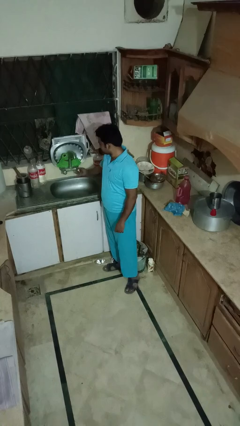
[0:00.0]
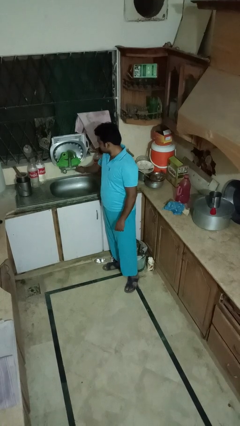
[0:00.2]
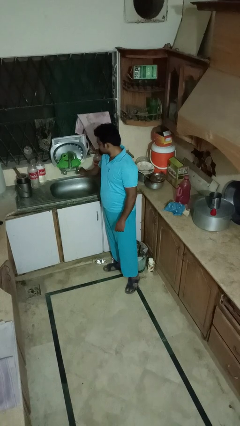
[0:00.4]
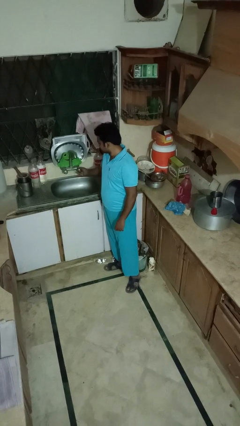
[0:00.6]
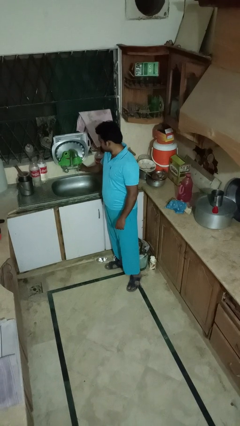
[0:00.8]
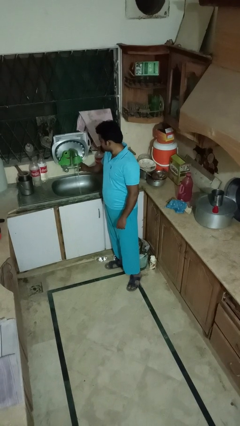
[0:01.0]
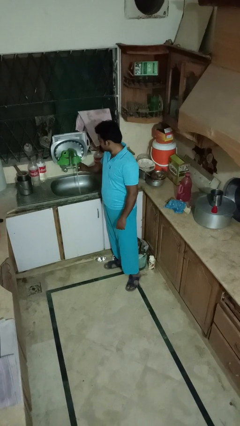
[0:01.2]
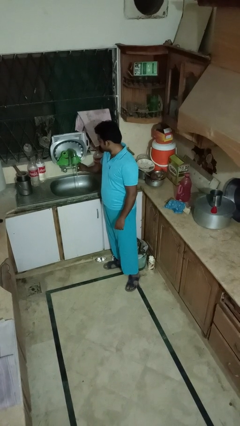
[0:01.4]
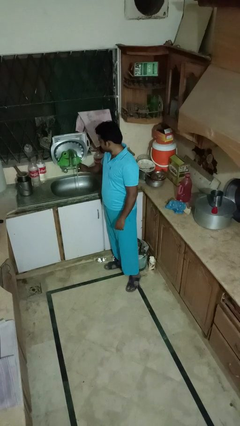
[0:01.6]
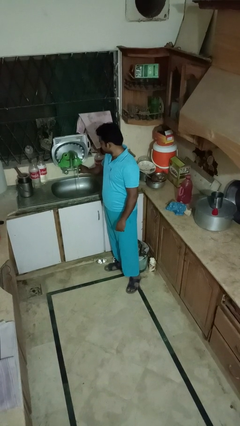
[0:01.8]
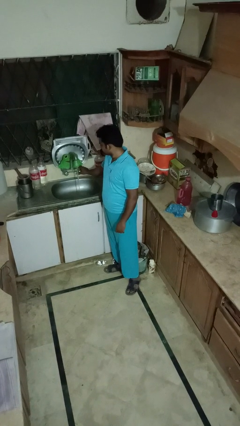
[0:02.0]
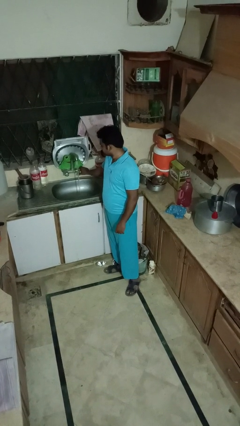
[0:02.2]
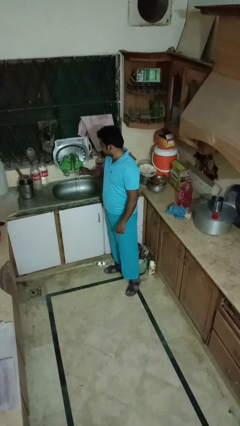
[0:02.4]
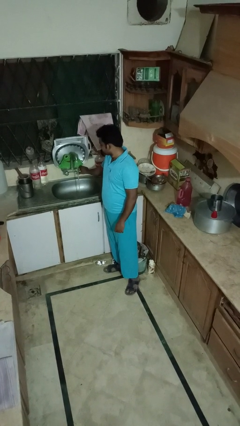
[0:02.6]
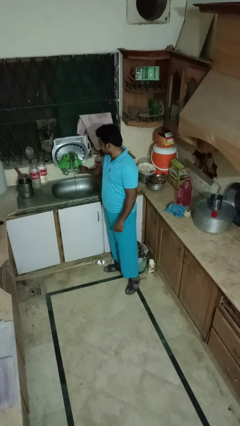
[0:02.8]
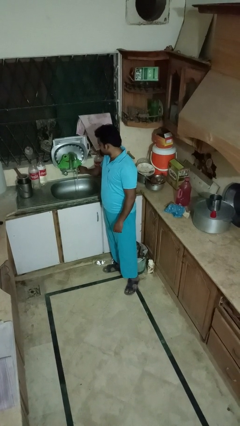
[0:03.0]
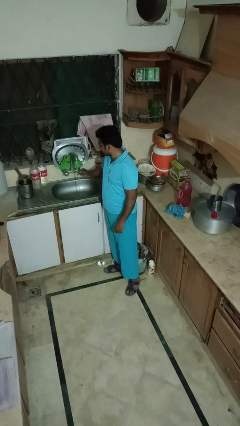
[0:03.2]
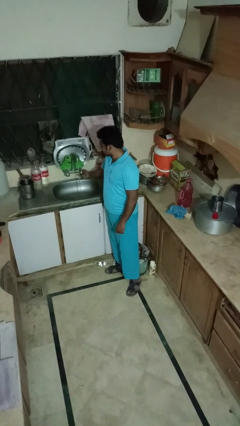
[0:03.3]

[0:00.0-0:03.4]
person turns on faucet

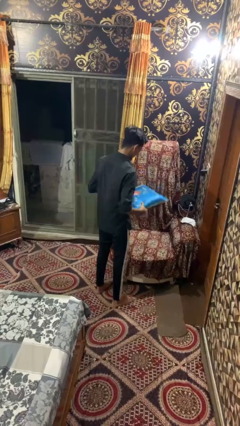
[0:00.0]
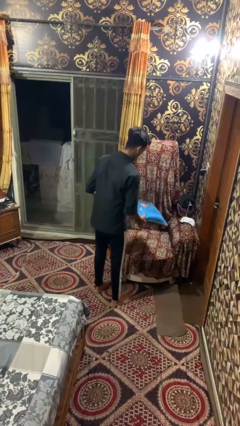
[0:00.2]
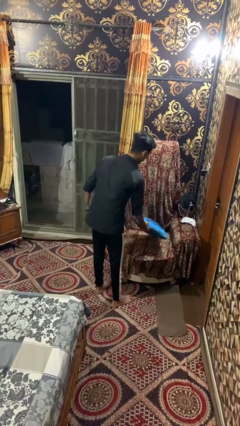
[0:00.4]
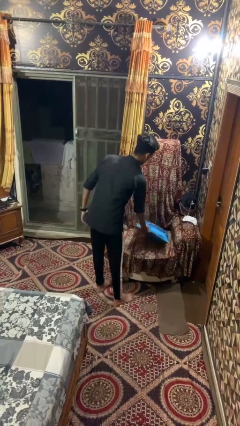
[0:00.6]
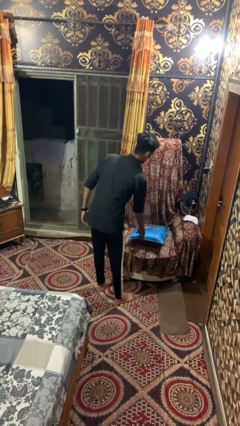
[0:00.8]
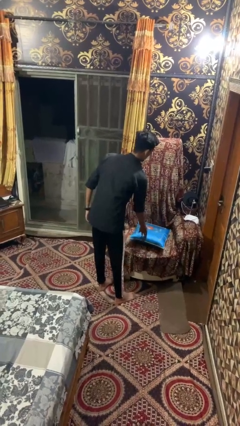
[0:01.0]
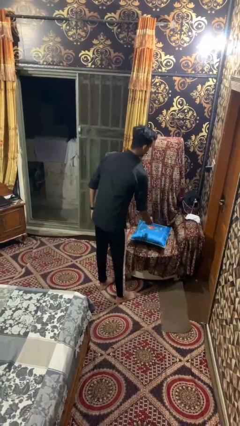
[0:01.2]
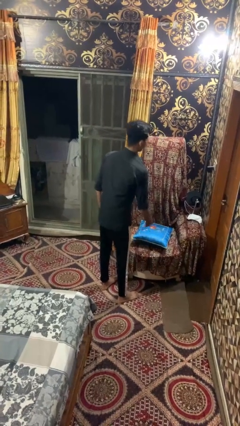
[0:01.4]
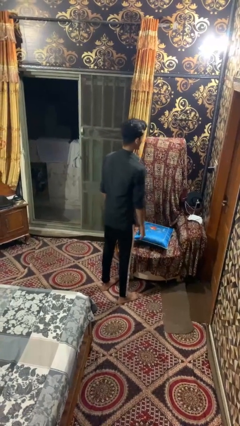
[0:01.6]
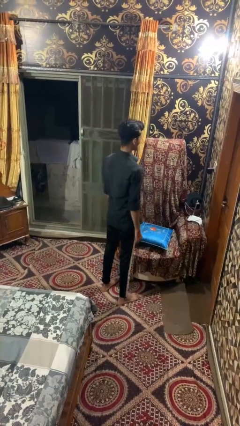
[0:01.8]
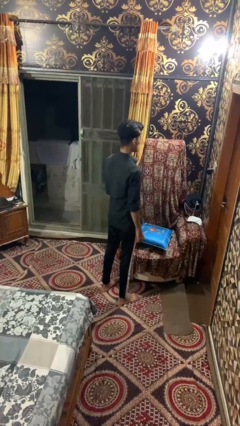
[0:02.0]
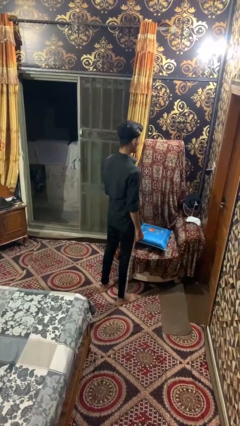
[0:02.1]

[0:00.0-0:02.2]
person puts down object on couch

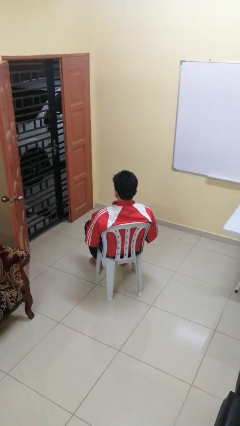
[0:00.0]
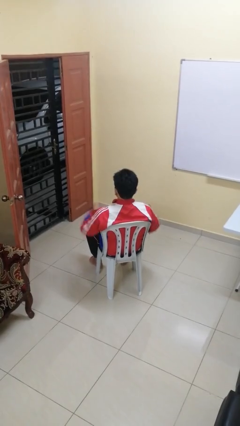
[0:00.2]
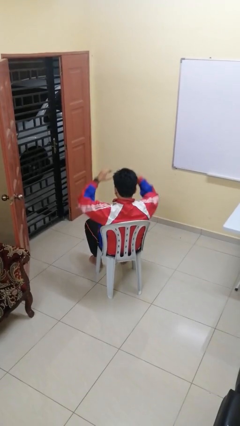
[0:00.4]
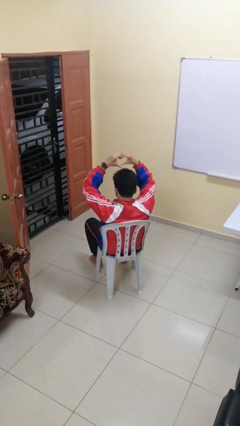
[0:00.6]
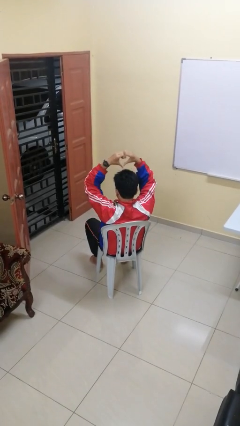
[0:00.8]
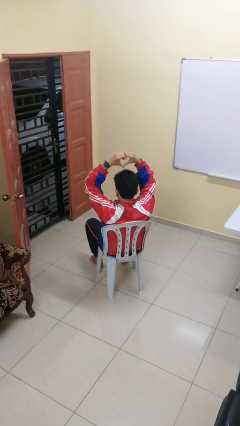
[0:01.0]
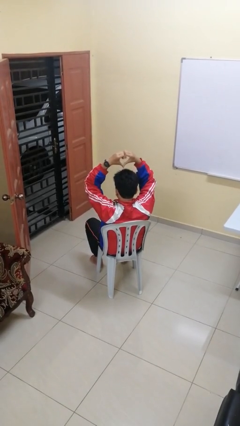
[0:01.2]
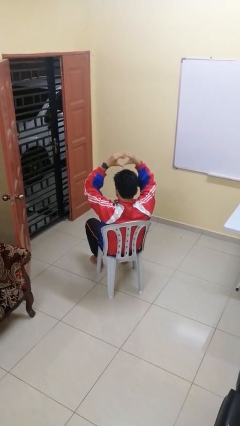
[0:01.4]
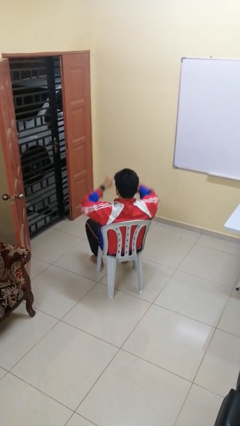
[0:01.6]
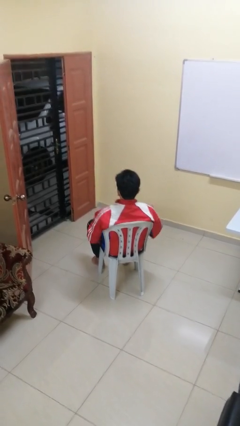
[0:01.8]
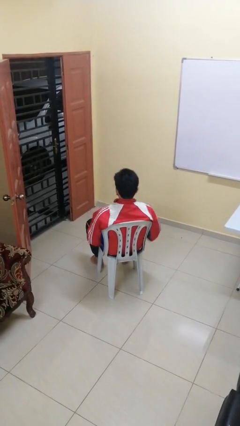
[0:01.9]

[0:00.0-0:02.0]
person gestures heart

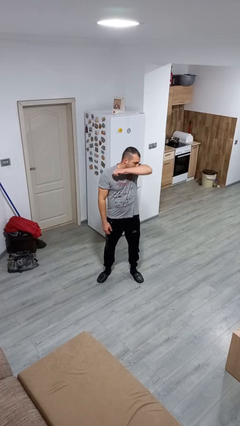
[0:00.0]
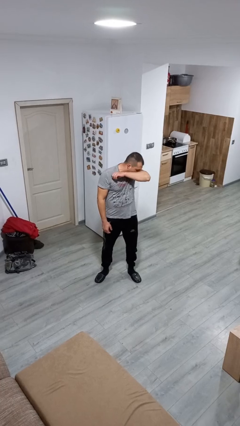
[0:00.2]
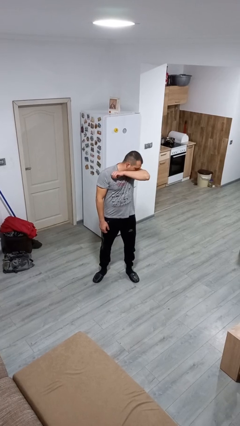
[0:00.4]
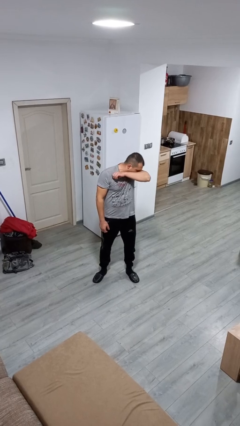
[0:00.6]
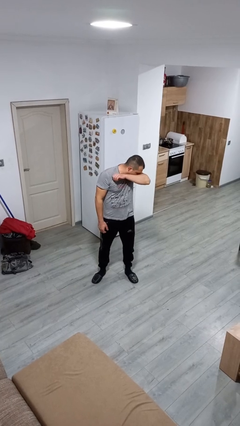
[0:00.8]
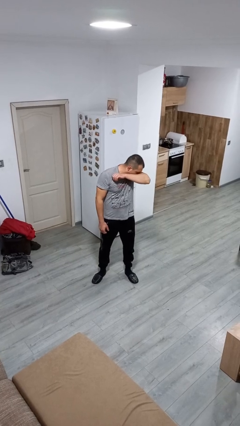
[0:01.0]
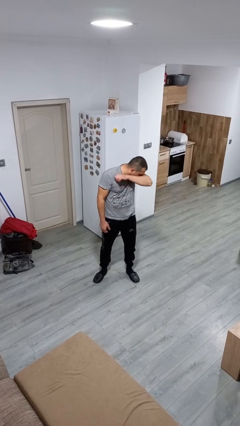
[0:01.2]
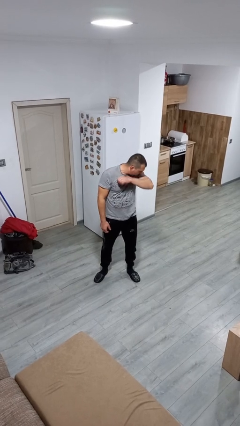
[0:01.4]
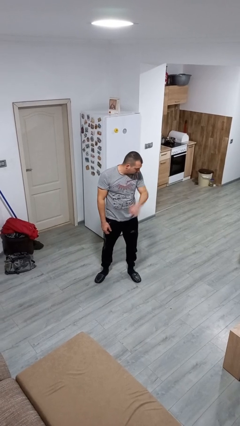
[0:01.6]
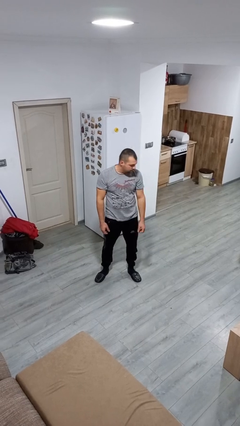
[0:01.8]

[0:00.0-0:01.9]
person sneezes into arm

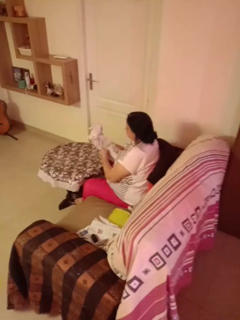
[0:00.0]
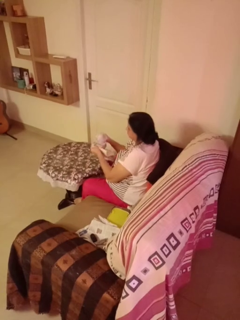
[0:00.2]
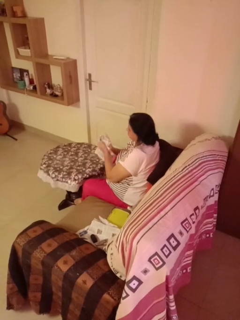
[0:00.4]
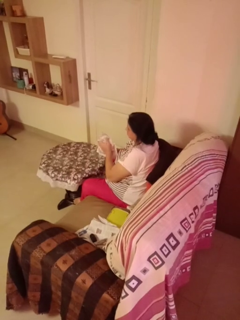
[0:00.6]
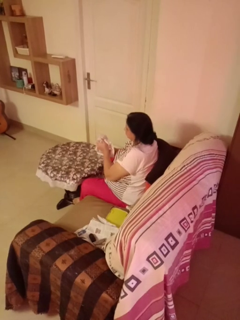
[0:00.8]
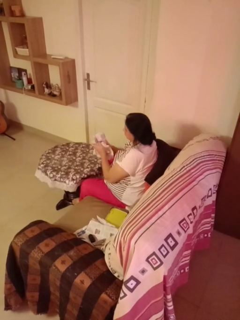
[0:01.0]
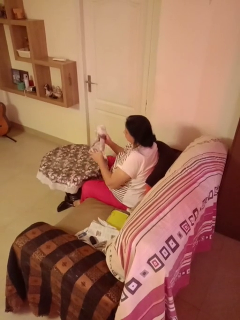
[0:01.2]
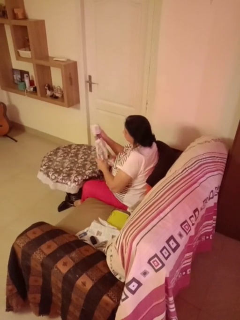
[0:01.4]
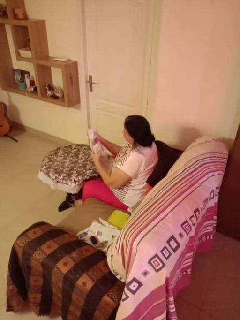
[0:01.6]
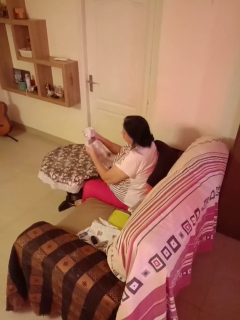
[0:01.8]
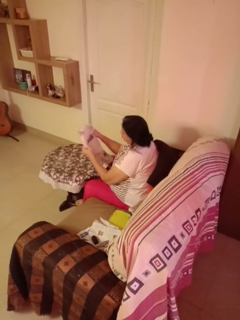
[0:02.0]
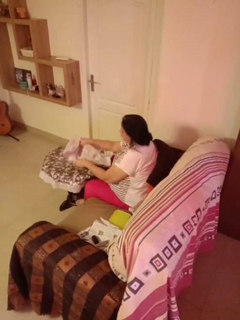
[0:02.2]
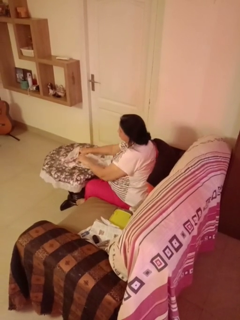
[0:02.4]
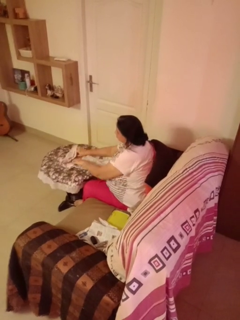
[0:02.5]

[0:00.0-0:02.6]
person crumples paper

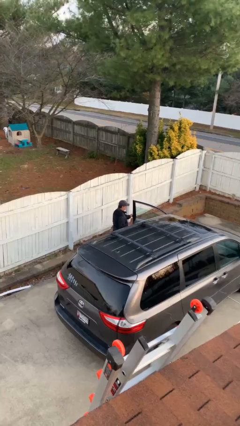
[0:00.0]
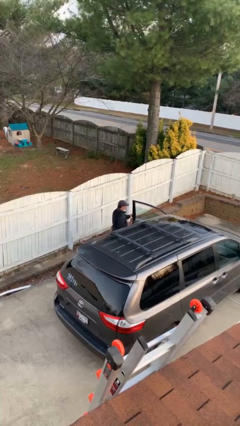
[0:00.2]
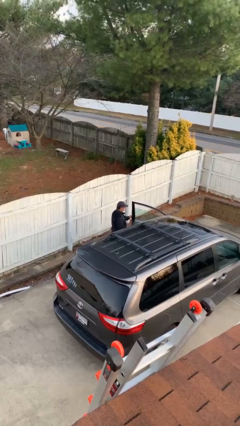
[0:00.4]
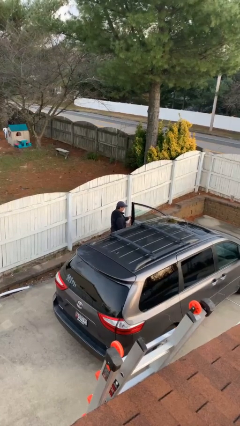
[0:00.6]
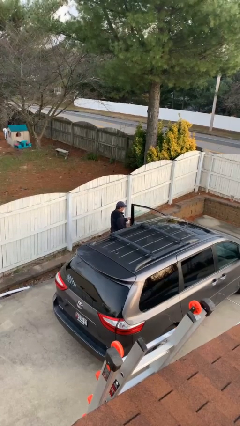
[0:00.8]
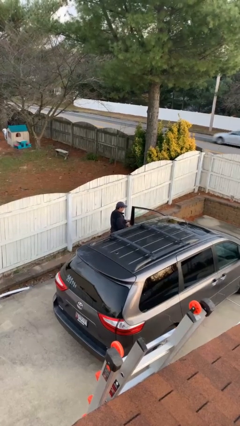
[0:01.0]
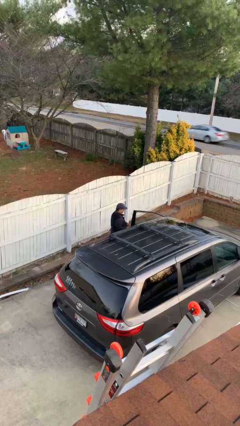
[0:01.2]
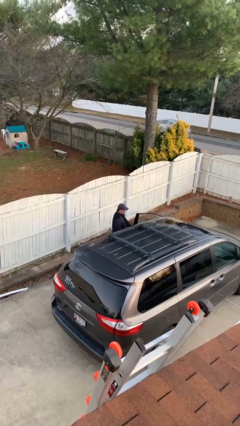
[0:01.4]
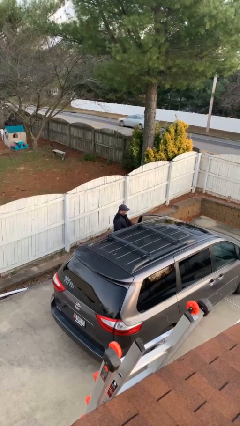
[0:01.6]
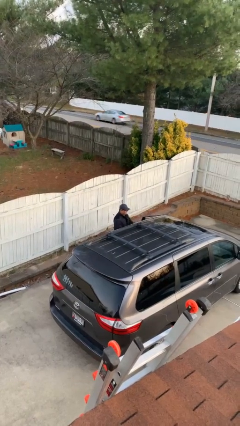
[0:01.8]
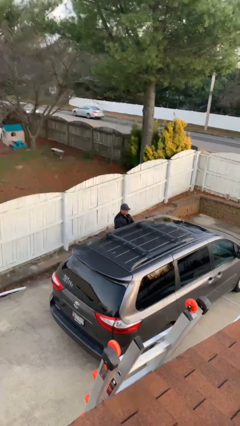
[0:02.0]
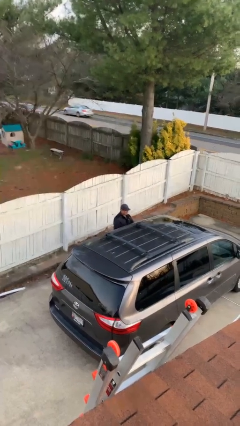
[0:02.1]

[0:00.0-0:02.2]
person closes car door

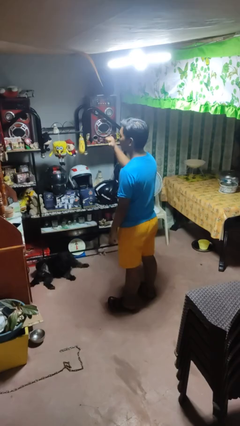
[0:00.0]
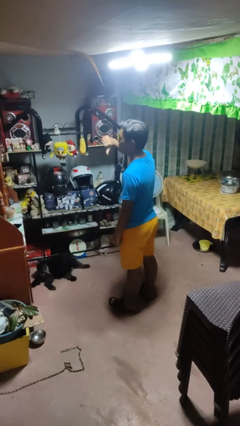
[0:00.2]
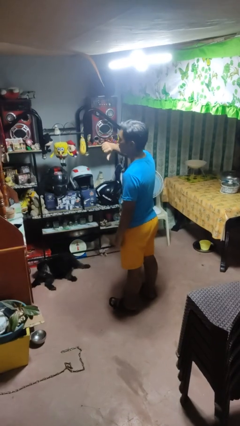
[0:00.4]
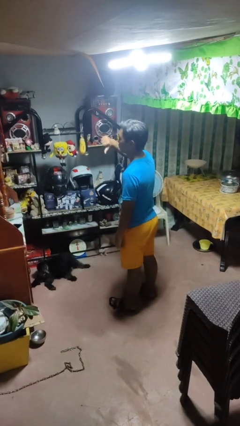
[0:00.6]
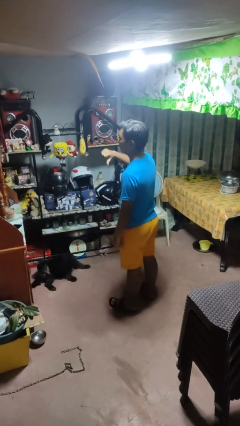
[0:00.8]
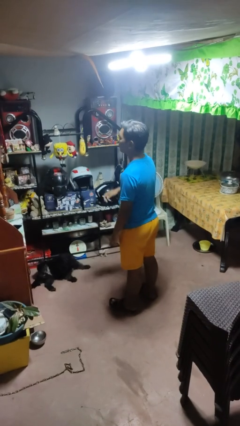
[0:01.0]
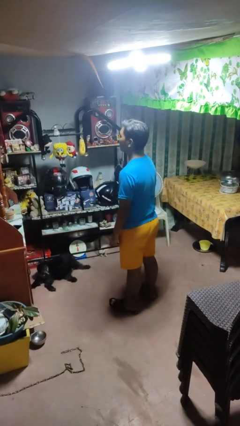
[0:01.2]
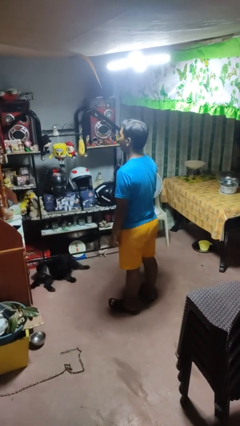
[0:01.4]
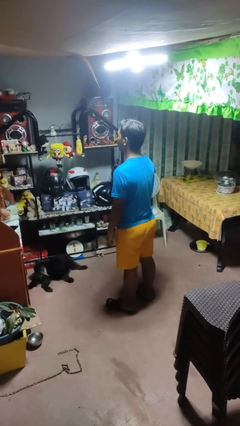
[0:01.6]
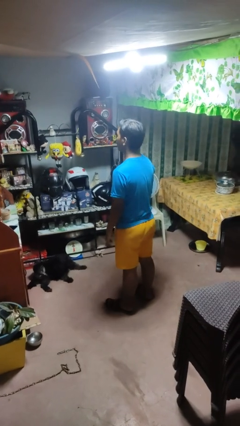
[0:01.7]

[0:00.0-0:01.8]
person gestures thumbs down

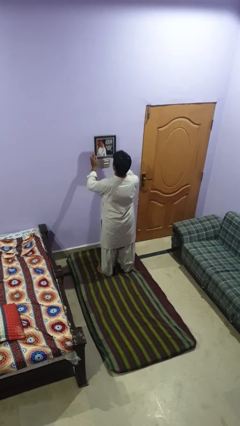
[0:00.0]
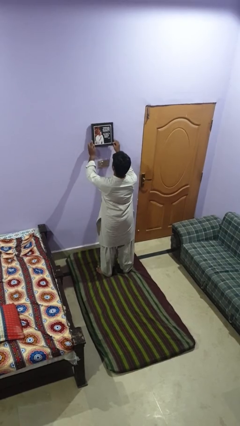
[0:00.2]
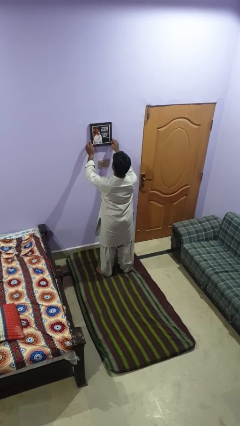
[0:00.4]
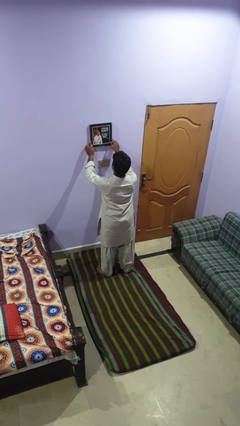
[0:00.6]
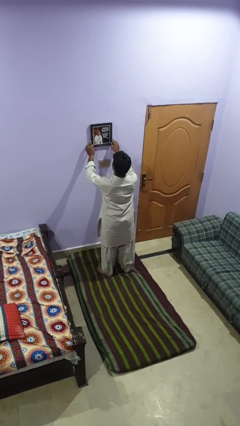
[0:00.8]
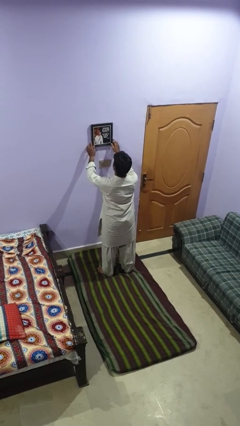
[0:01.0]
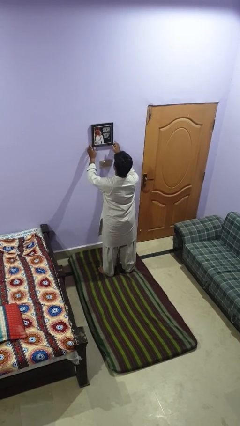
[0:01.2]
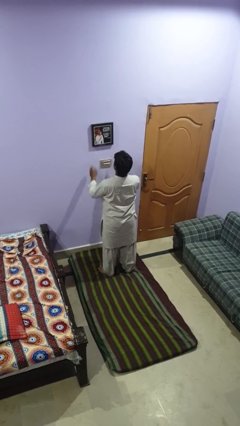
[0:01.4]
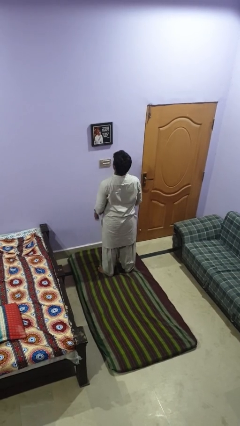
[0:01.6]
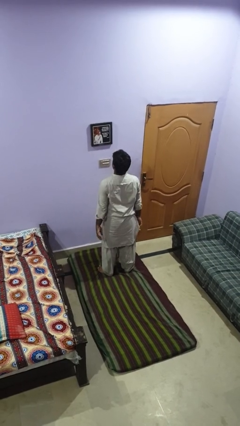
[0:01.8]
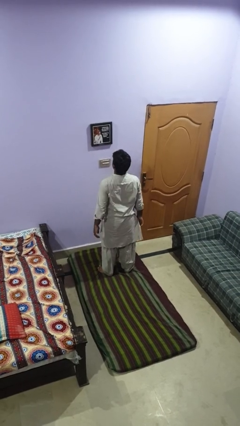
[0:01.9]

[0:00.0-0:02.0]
person puts up picture frame
